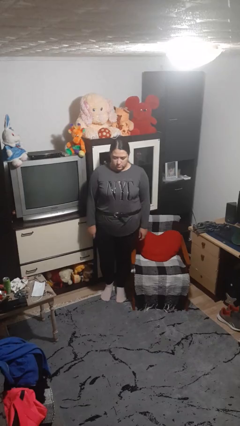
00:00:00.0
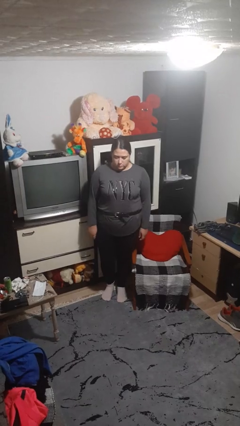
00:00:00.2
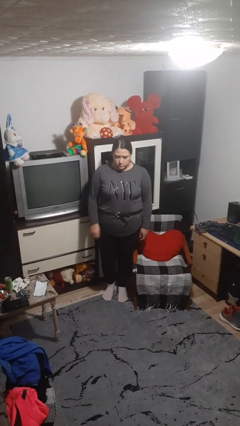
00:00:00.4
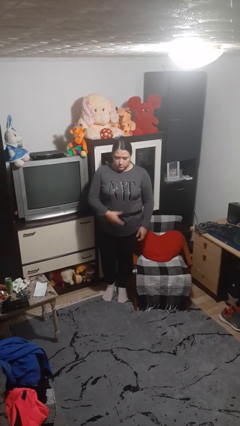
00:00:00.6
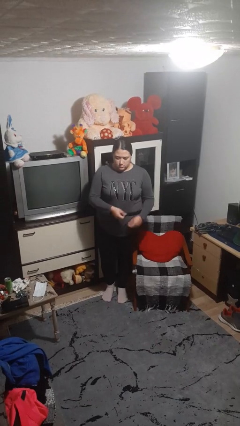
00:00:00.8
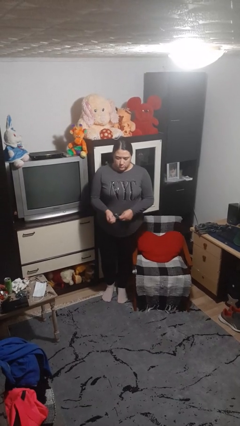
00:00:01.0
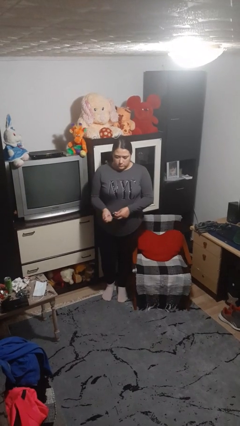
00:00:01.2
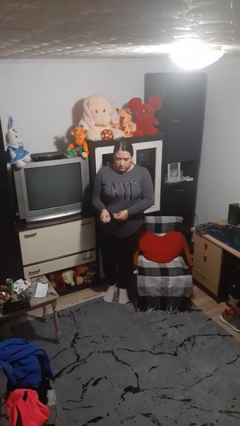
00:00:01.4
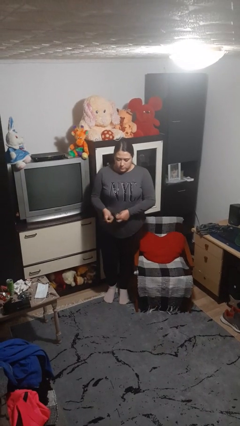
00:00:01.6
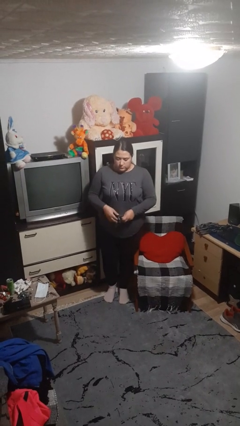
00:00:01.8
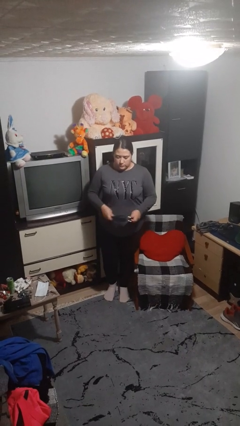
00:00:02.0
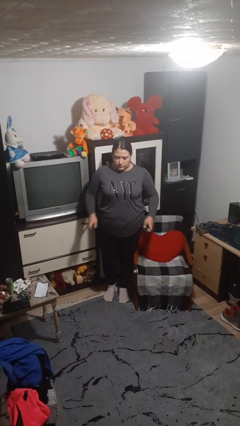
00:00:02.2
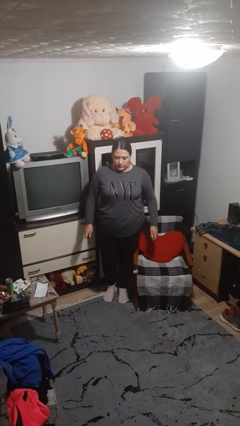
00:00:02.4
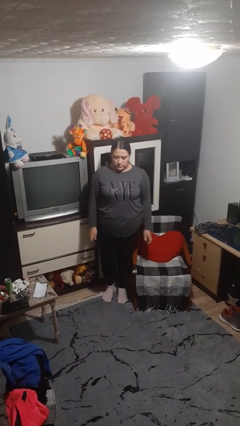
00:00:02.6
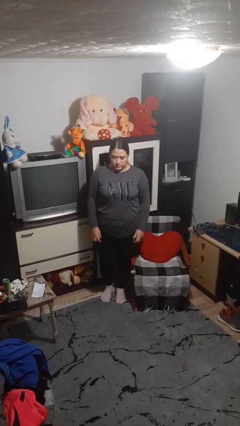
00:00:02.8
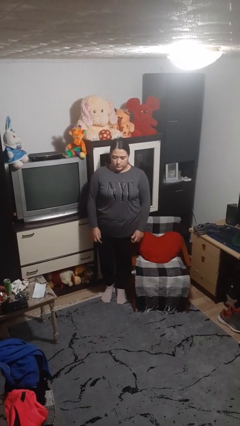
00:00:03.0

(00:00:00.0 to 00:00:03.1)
person takes off belt

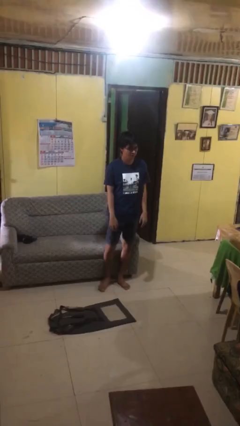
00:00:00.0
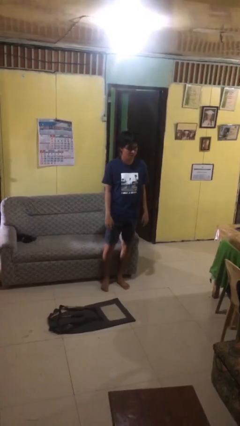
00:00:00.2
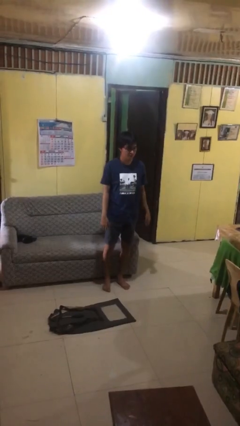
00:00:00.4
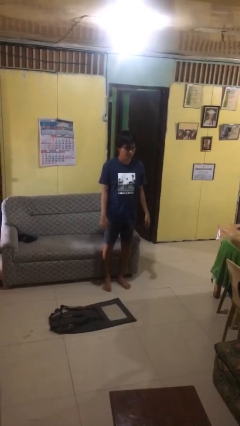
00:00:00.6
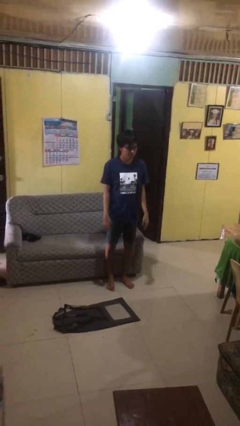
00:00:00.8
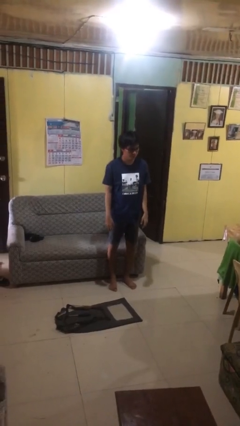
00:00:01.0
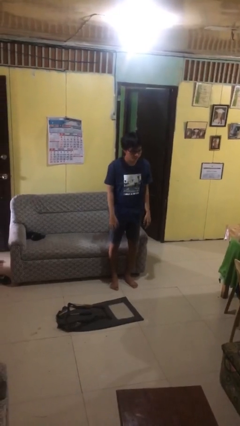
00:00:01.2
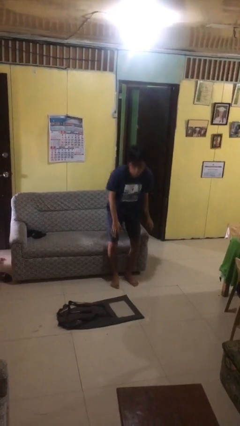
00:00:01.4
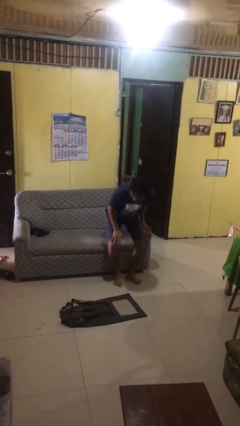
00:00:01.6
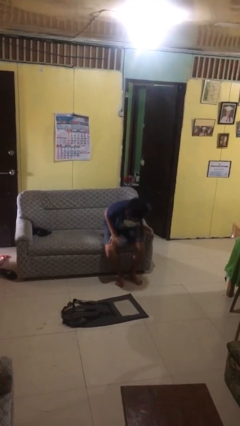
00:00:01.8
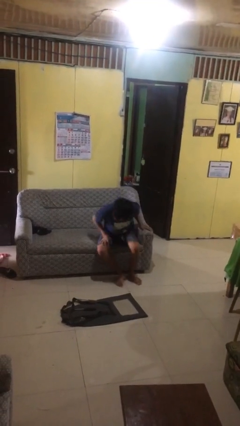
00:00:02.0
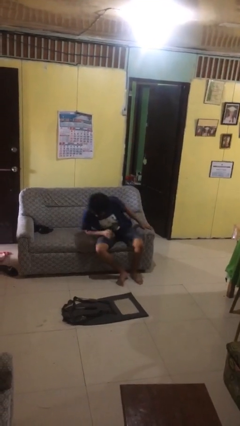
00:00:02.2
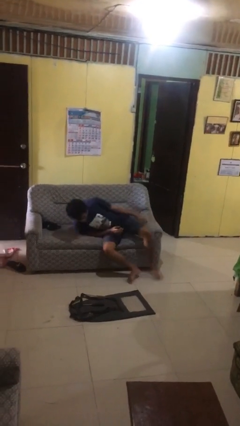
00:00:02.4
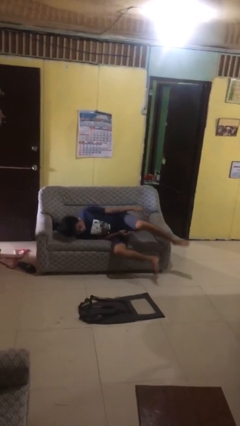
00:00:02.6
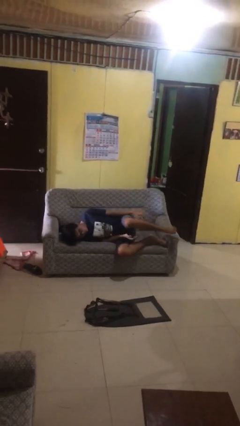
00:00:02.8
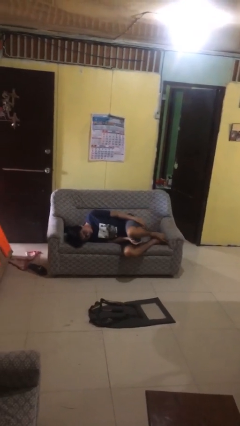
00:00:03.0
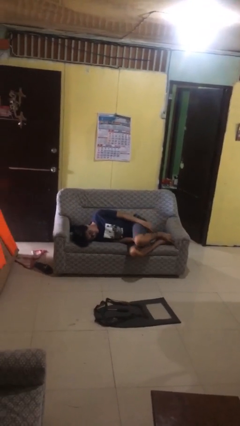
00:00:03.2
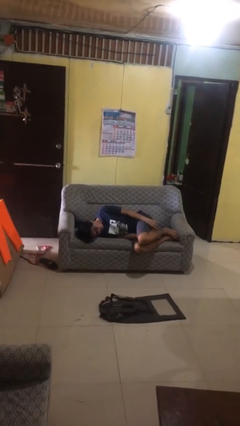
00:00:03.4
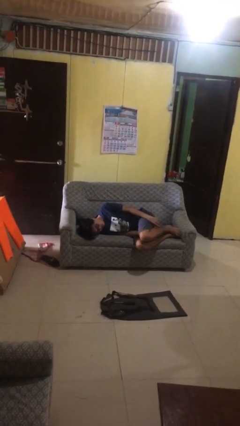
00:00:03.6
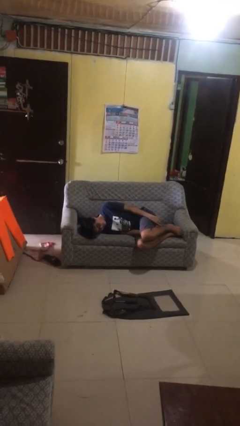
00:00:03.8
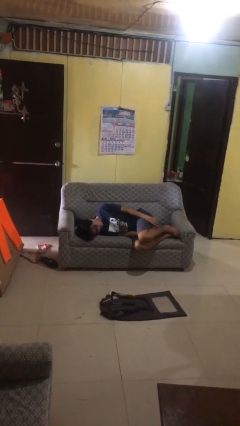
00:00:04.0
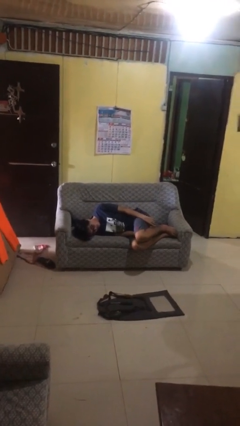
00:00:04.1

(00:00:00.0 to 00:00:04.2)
person lies down on couch

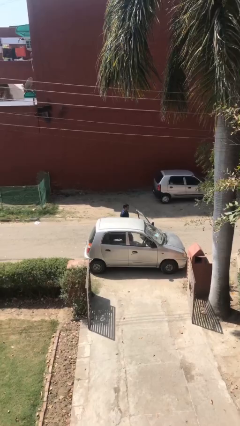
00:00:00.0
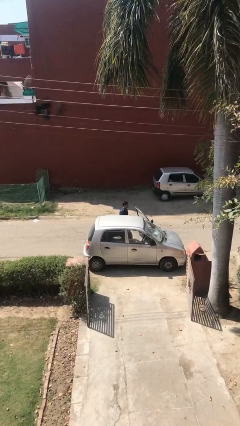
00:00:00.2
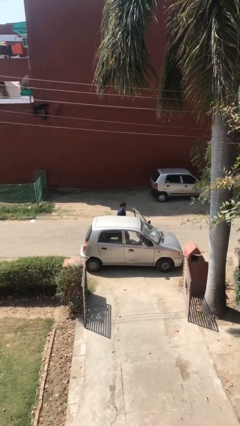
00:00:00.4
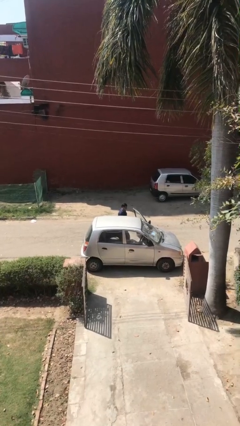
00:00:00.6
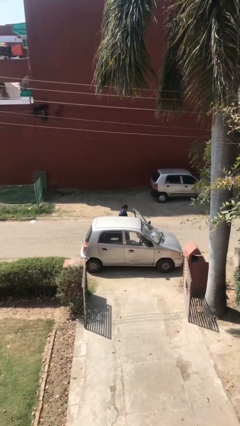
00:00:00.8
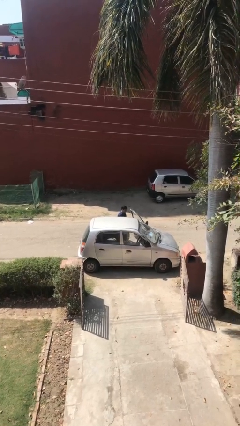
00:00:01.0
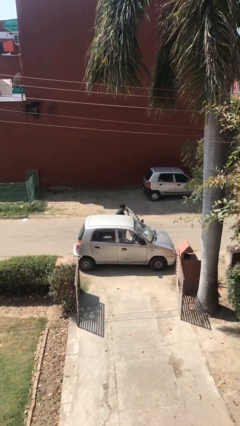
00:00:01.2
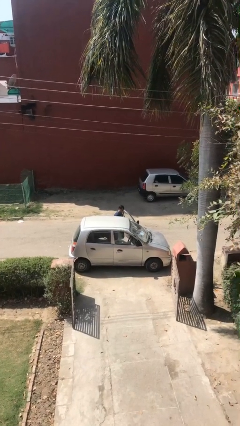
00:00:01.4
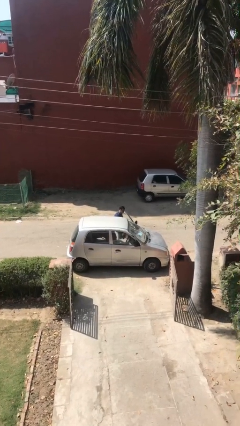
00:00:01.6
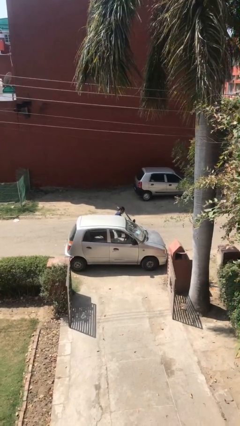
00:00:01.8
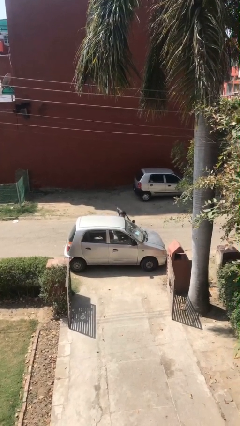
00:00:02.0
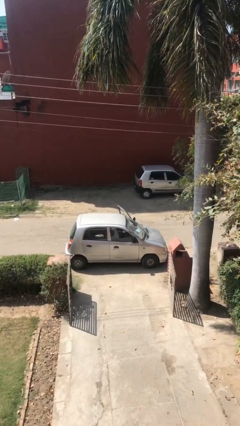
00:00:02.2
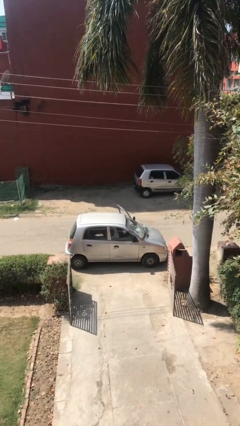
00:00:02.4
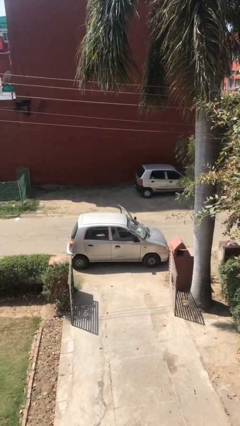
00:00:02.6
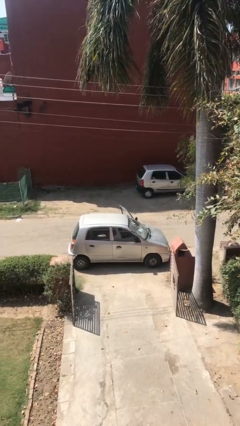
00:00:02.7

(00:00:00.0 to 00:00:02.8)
person enters car

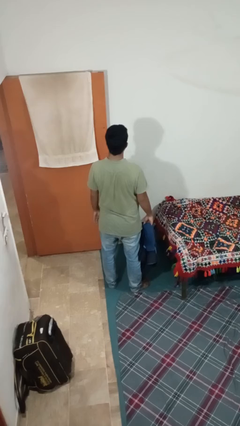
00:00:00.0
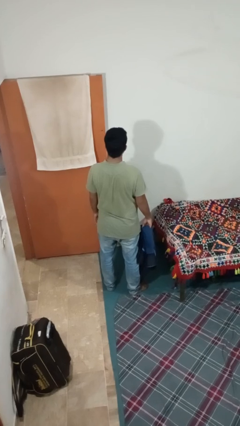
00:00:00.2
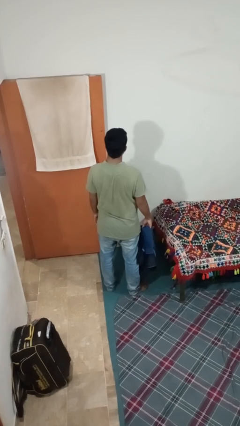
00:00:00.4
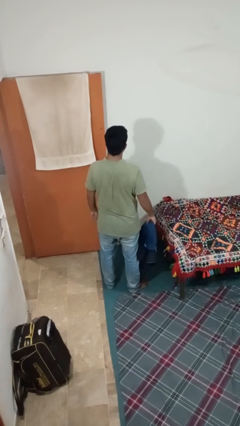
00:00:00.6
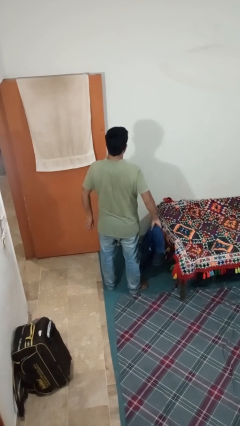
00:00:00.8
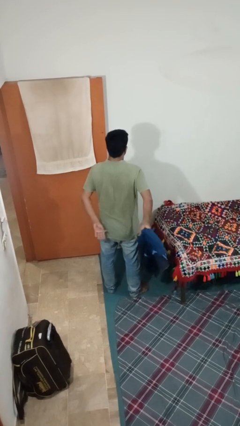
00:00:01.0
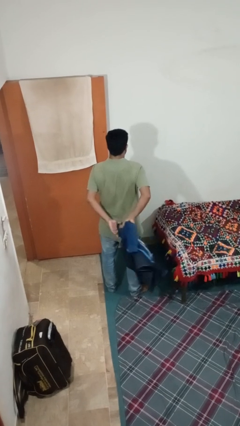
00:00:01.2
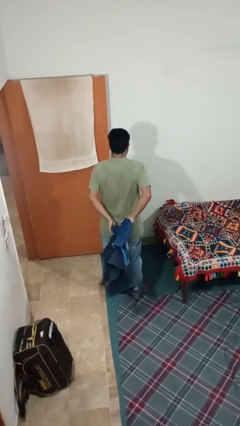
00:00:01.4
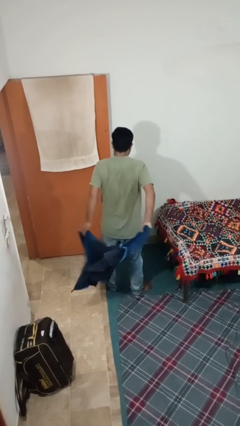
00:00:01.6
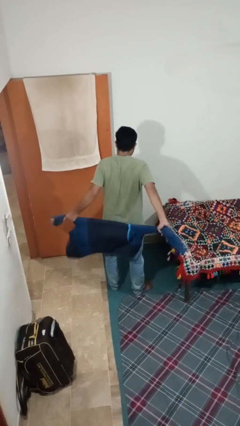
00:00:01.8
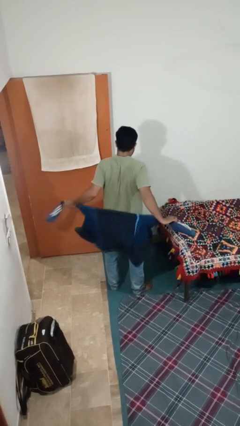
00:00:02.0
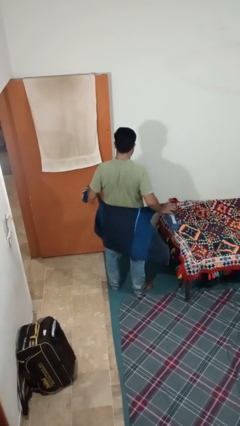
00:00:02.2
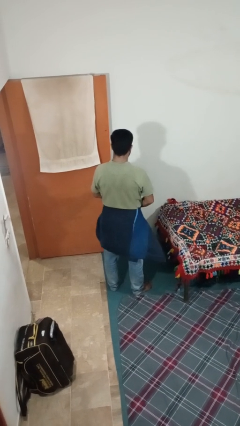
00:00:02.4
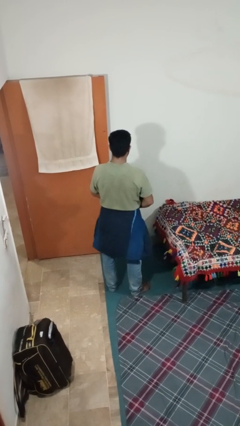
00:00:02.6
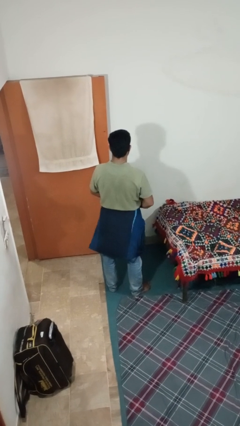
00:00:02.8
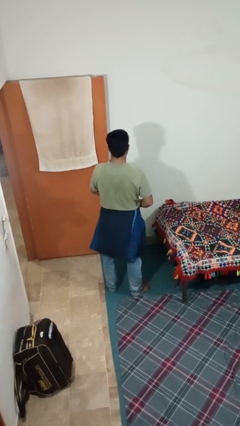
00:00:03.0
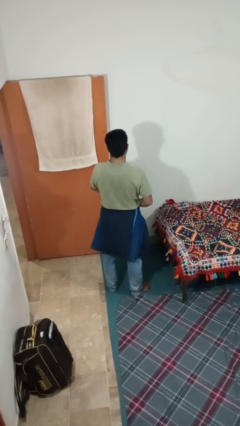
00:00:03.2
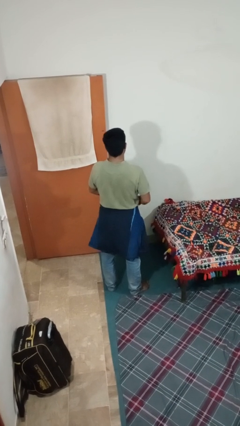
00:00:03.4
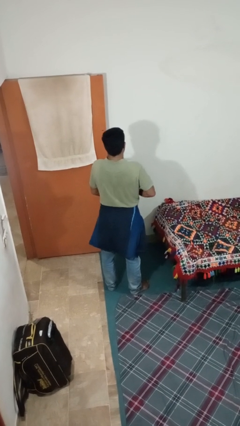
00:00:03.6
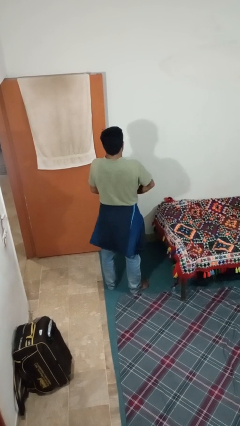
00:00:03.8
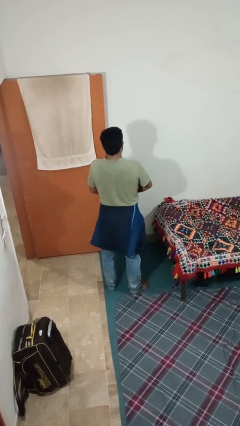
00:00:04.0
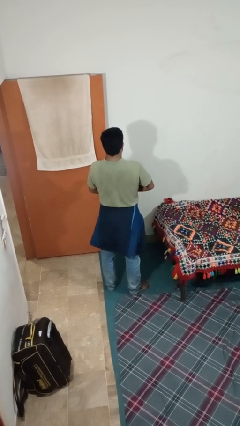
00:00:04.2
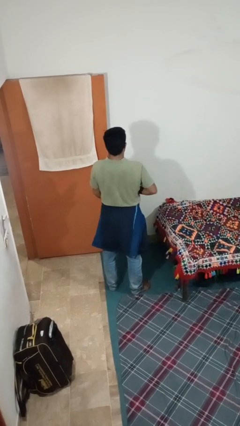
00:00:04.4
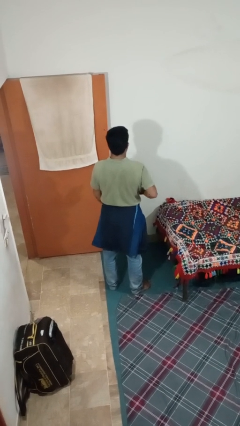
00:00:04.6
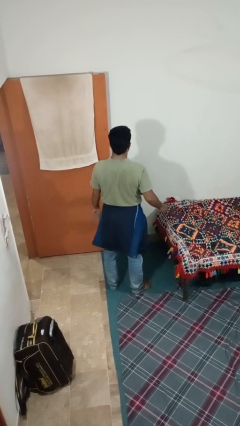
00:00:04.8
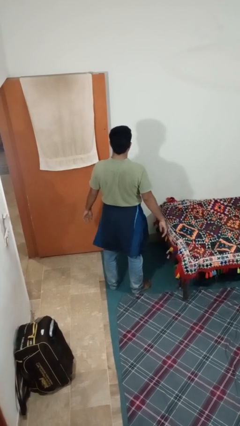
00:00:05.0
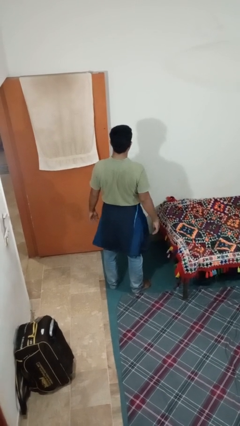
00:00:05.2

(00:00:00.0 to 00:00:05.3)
person ties jacket around waist

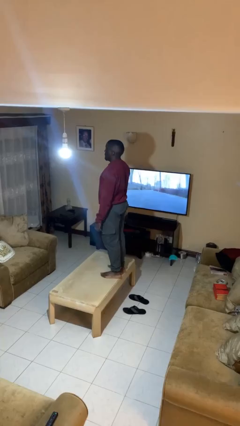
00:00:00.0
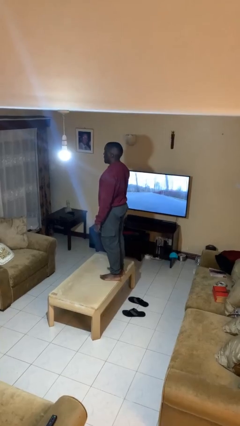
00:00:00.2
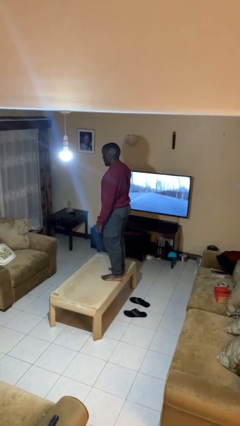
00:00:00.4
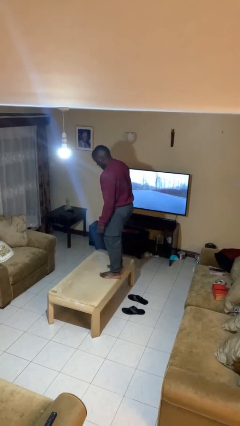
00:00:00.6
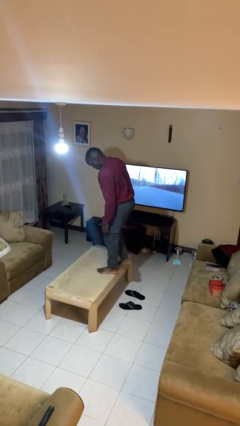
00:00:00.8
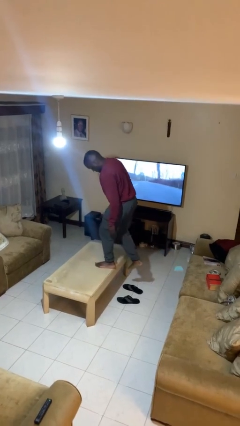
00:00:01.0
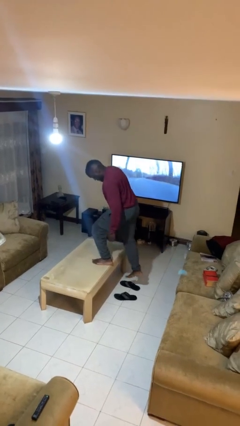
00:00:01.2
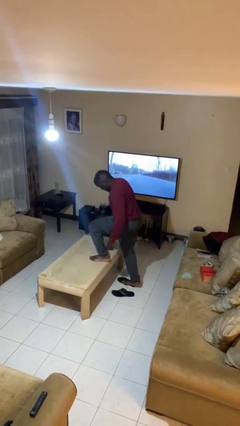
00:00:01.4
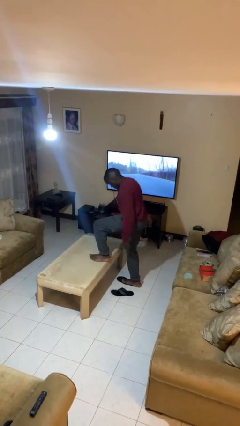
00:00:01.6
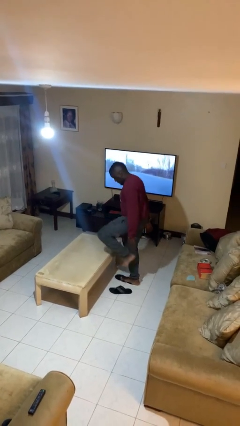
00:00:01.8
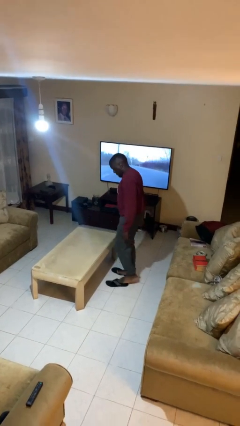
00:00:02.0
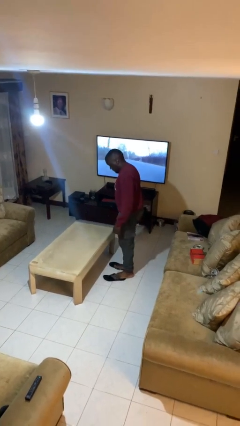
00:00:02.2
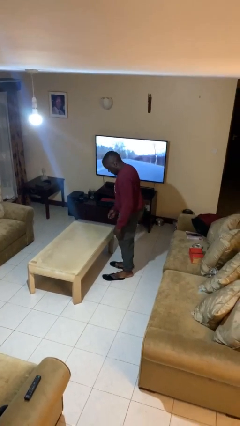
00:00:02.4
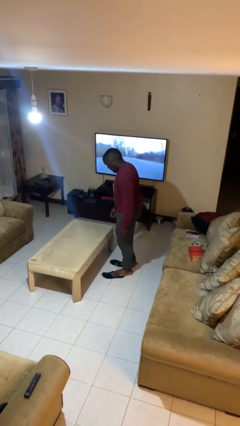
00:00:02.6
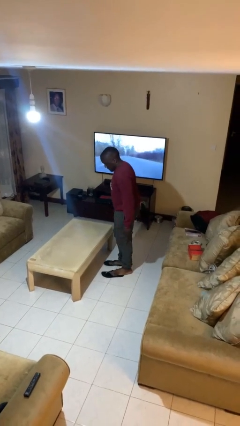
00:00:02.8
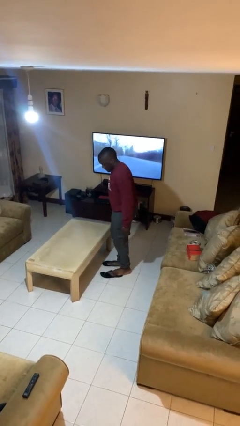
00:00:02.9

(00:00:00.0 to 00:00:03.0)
person climbs off table
